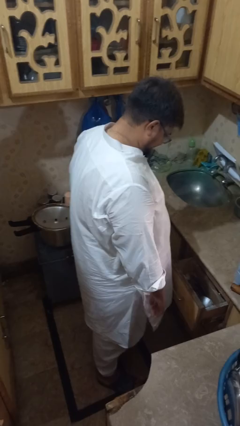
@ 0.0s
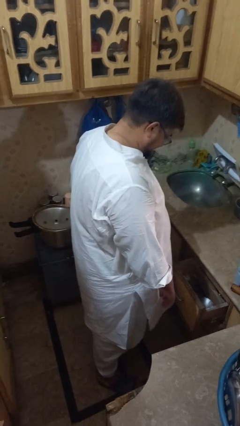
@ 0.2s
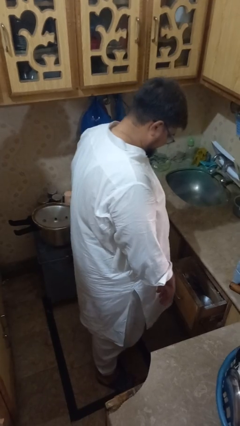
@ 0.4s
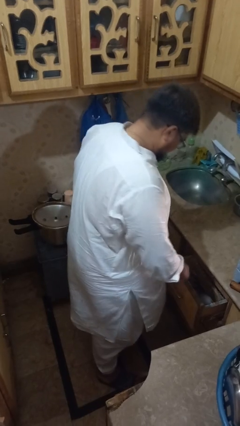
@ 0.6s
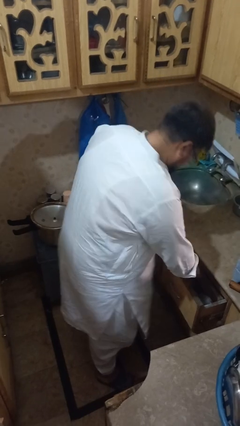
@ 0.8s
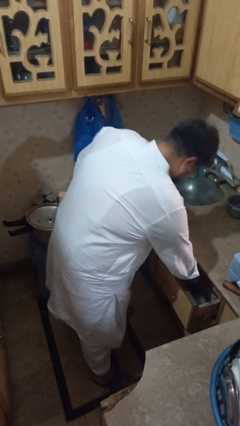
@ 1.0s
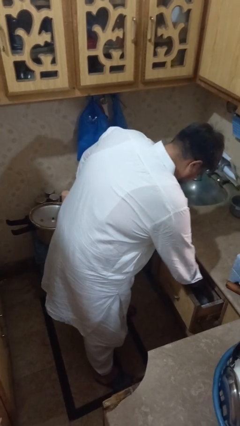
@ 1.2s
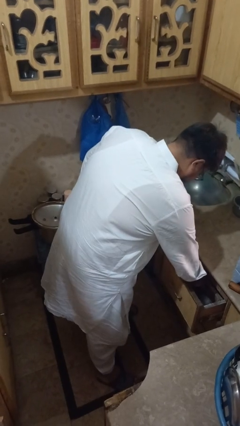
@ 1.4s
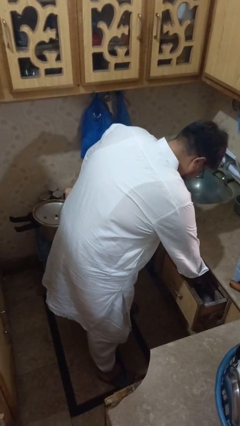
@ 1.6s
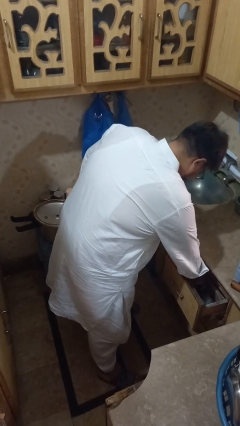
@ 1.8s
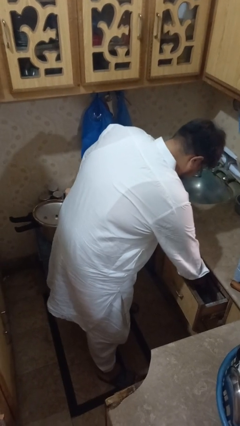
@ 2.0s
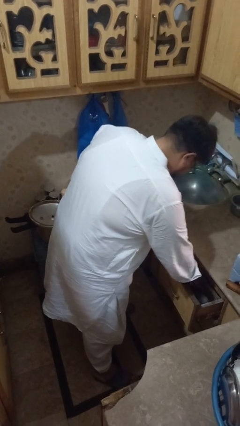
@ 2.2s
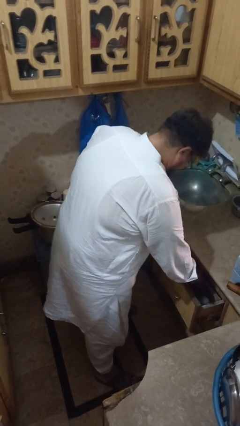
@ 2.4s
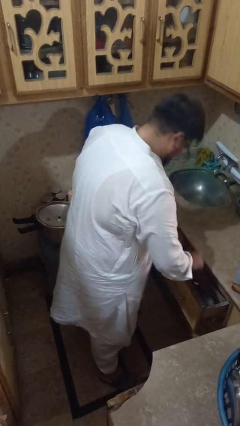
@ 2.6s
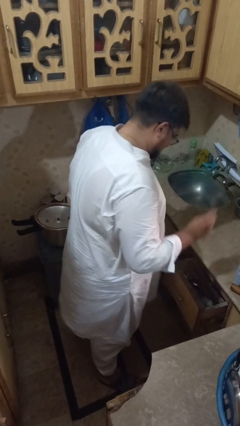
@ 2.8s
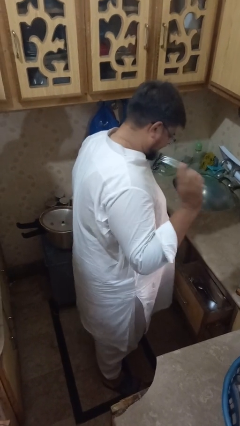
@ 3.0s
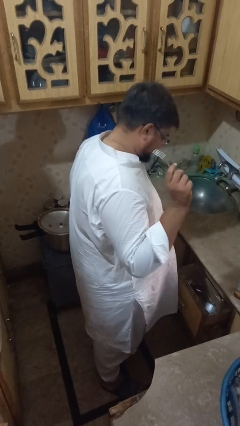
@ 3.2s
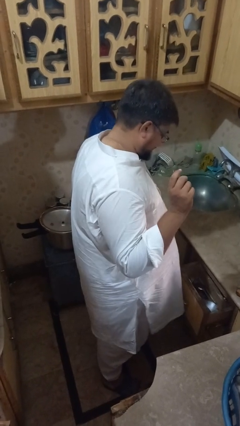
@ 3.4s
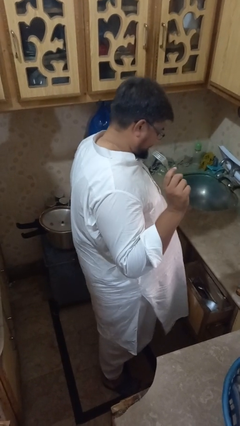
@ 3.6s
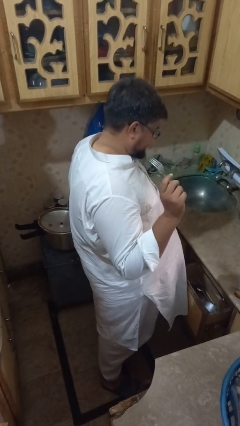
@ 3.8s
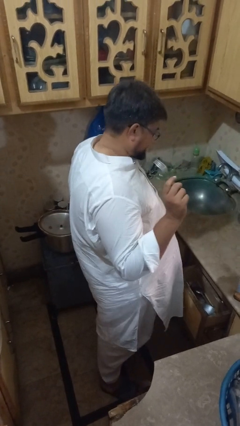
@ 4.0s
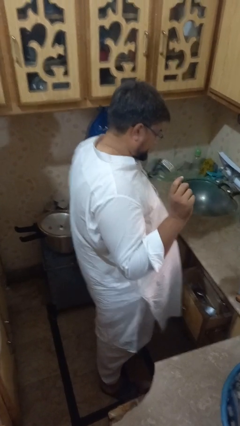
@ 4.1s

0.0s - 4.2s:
person searches in kitchen drawer

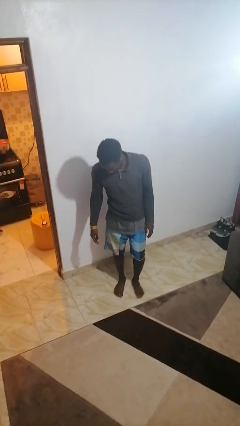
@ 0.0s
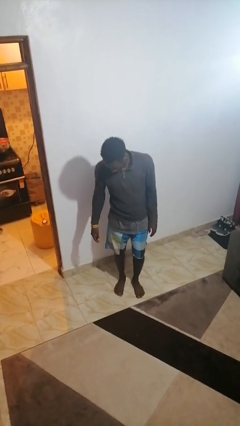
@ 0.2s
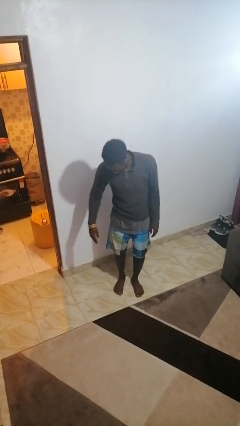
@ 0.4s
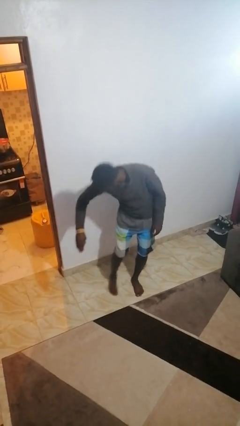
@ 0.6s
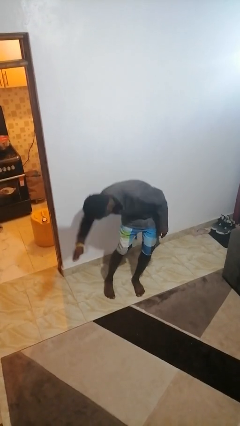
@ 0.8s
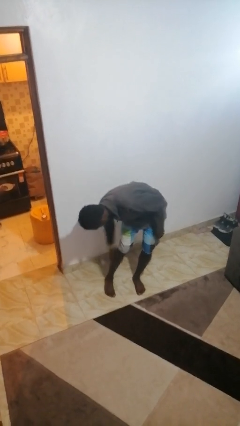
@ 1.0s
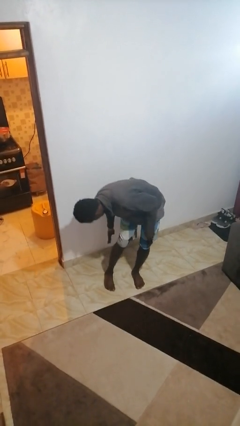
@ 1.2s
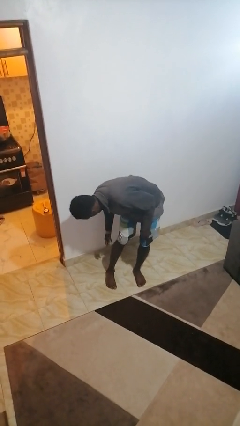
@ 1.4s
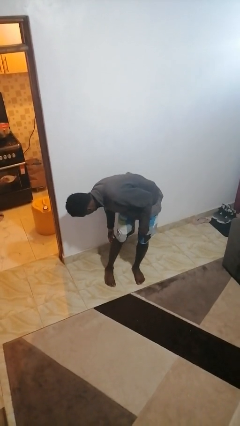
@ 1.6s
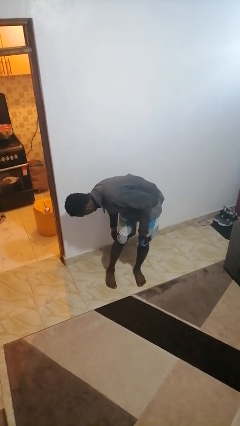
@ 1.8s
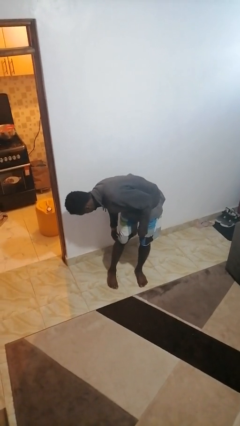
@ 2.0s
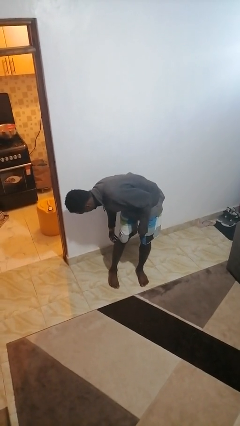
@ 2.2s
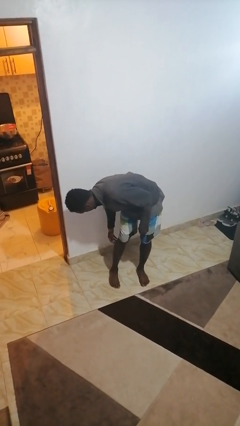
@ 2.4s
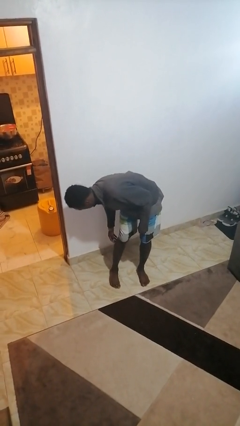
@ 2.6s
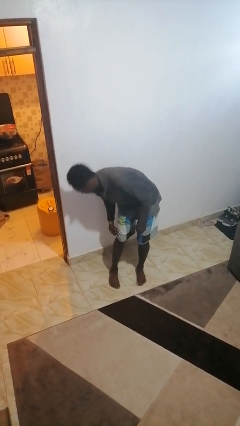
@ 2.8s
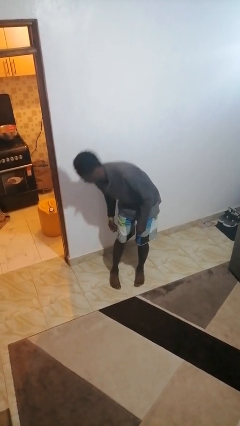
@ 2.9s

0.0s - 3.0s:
person swats bug

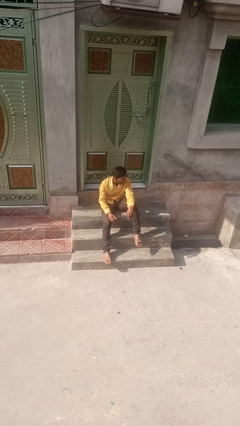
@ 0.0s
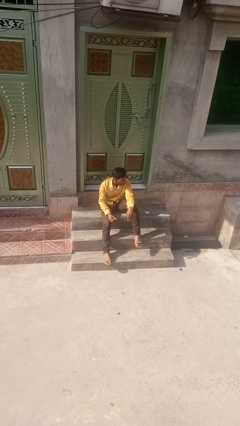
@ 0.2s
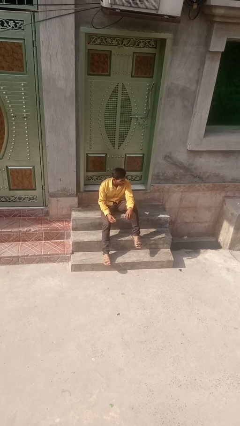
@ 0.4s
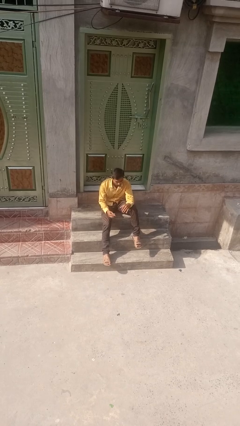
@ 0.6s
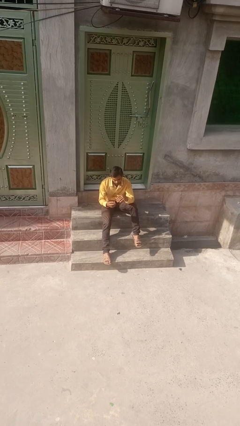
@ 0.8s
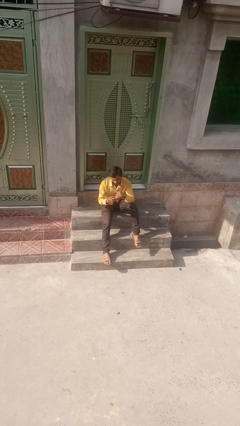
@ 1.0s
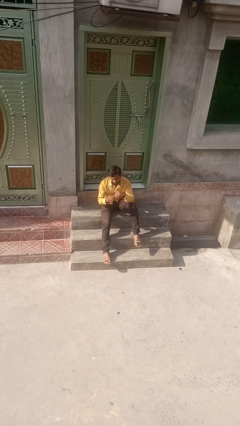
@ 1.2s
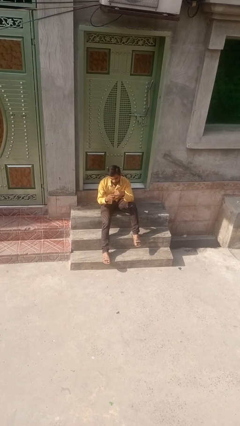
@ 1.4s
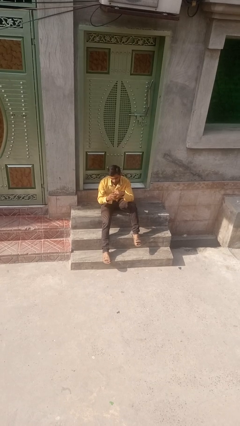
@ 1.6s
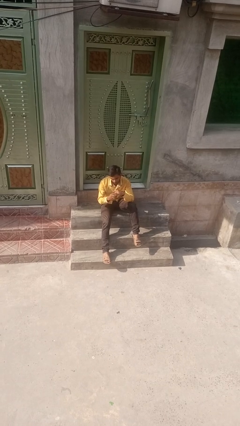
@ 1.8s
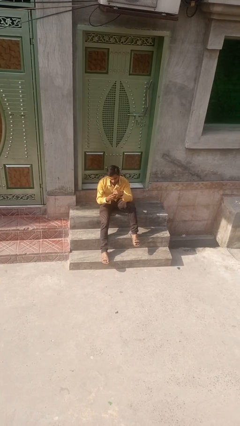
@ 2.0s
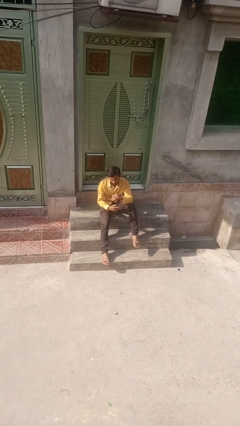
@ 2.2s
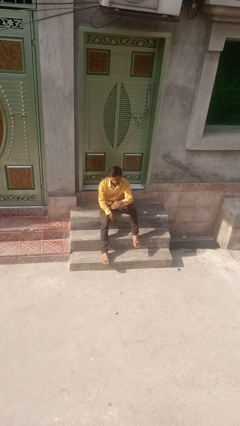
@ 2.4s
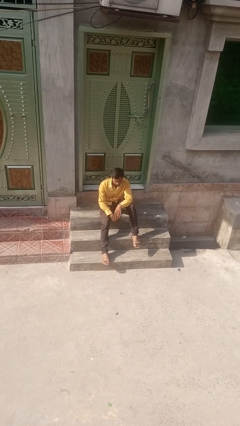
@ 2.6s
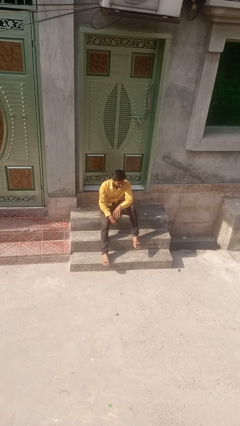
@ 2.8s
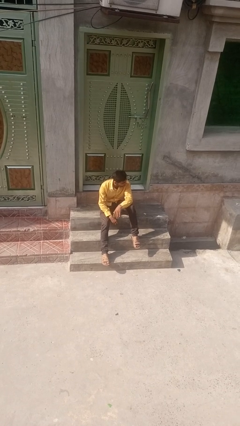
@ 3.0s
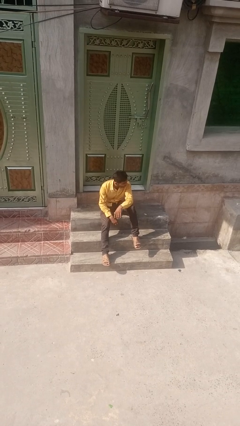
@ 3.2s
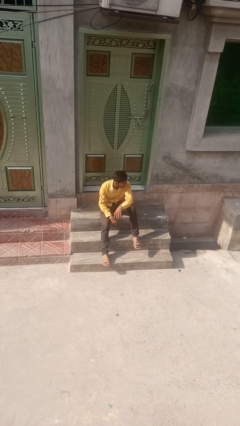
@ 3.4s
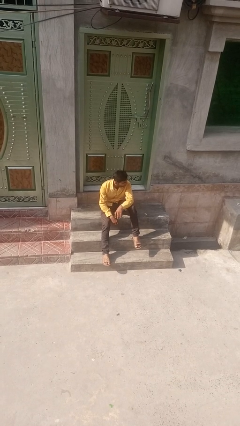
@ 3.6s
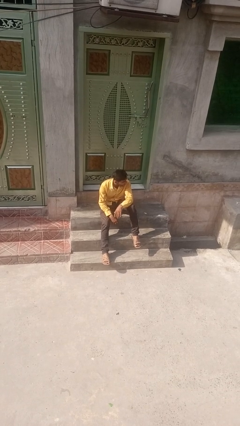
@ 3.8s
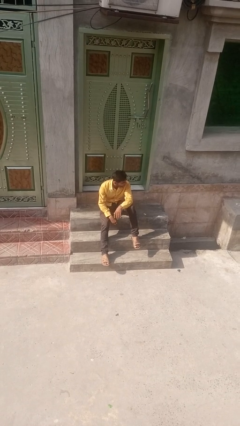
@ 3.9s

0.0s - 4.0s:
person puts on ring

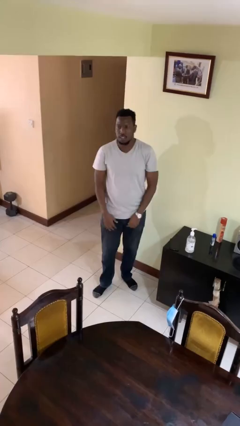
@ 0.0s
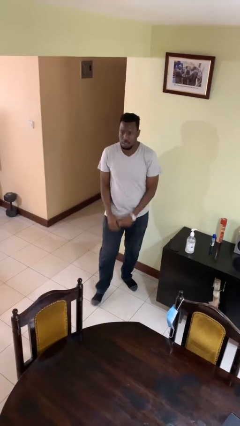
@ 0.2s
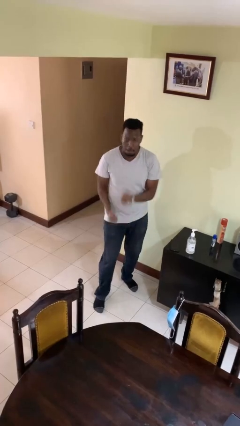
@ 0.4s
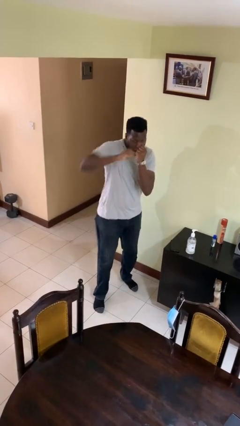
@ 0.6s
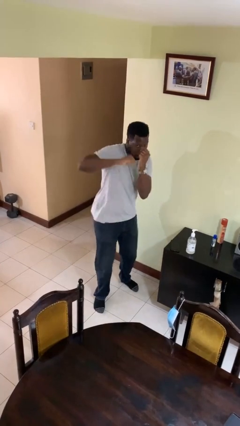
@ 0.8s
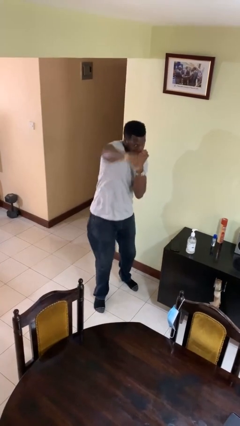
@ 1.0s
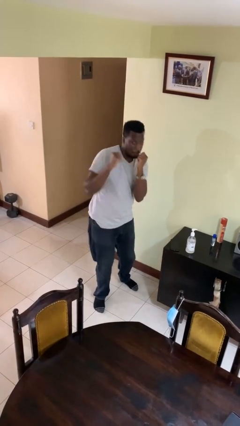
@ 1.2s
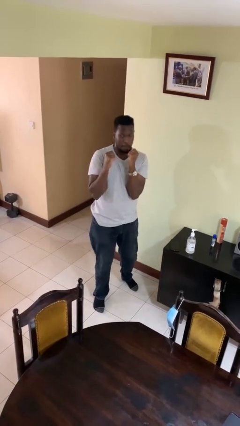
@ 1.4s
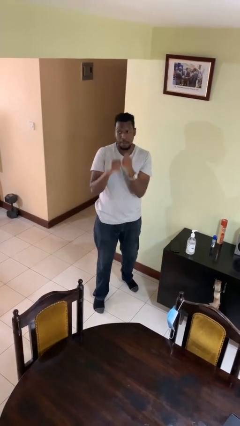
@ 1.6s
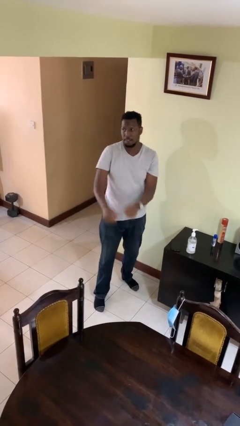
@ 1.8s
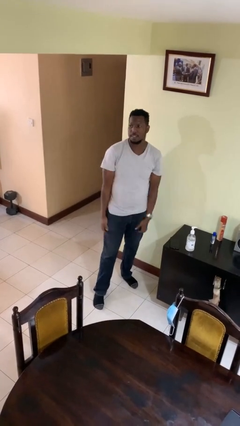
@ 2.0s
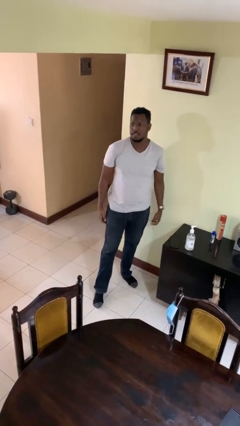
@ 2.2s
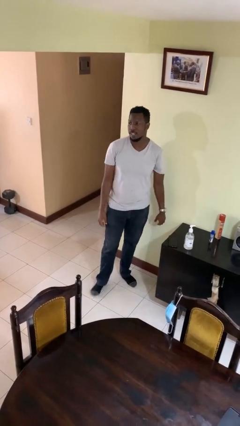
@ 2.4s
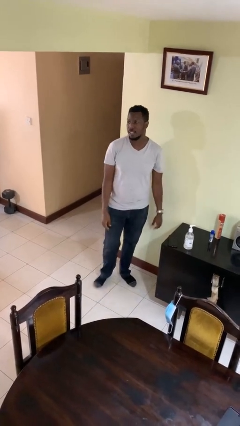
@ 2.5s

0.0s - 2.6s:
person punches

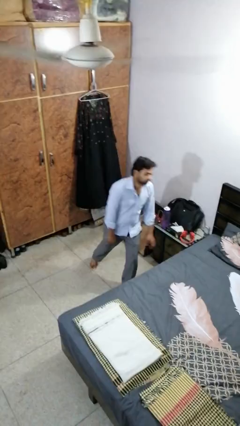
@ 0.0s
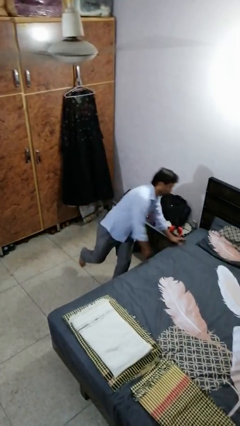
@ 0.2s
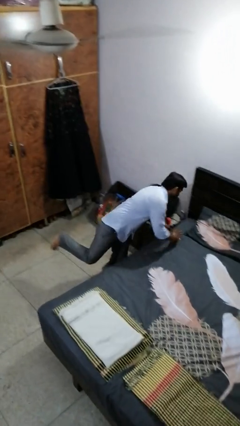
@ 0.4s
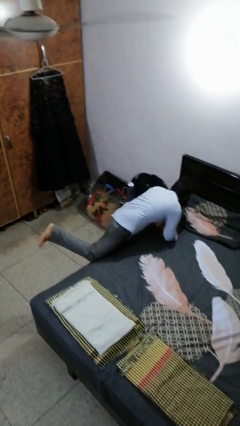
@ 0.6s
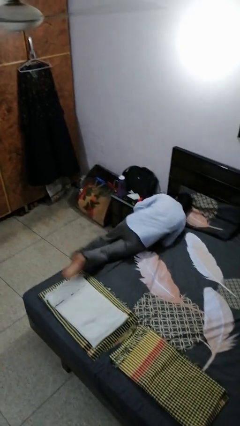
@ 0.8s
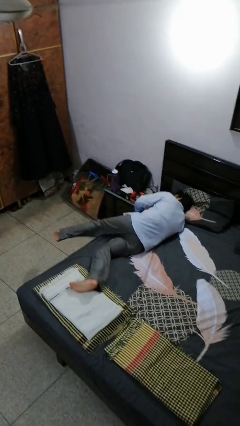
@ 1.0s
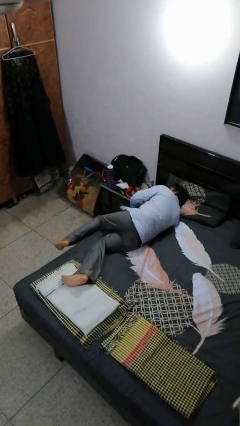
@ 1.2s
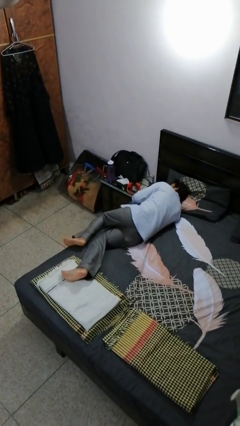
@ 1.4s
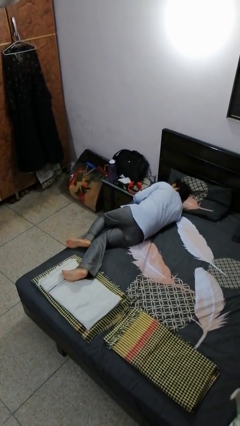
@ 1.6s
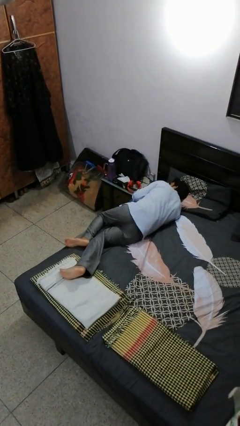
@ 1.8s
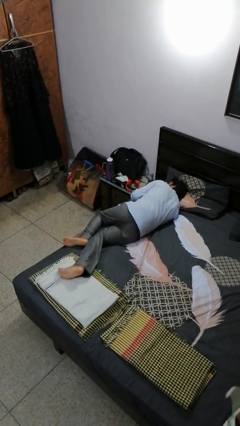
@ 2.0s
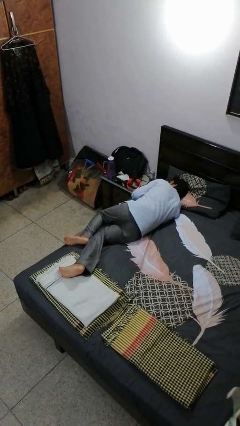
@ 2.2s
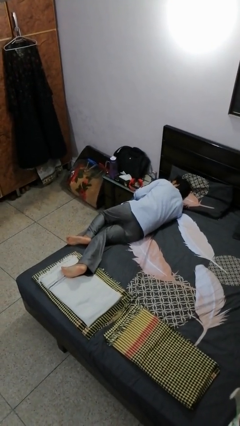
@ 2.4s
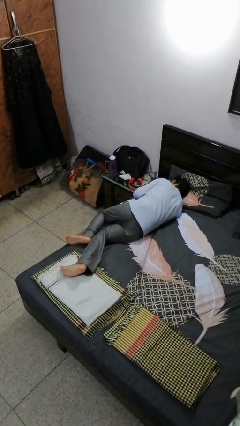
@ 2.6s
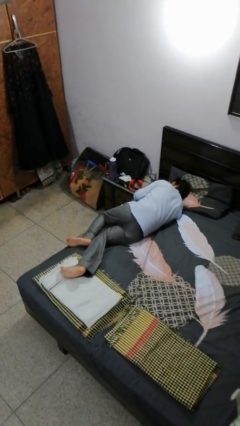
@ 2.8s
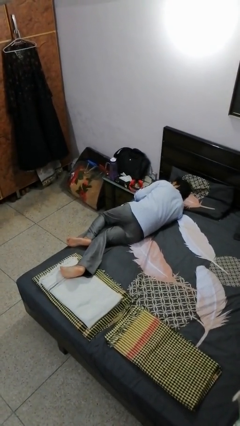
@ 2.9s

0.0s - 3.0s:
person lies down on bed

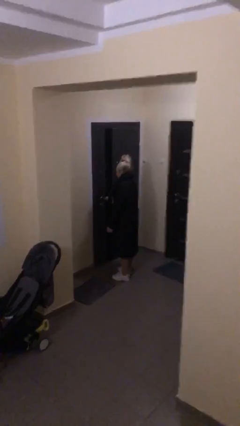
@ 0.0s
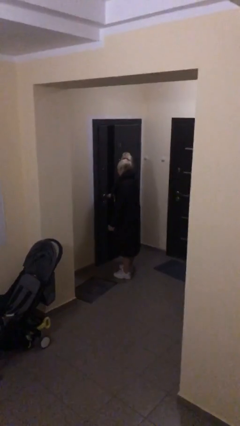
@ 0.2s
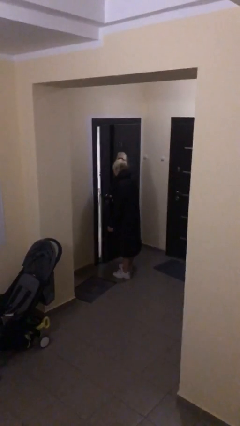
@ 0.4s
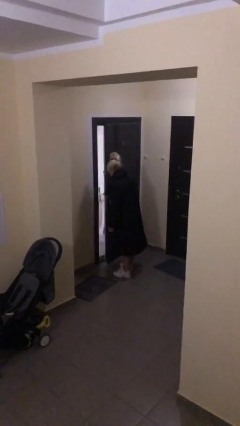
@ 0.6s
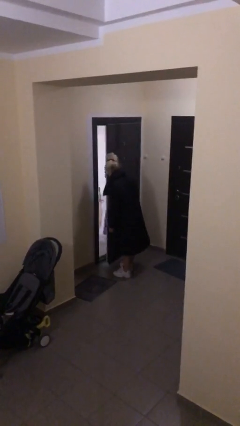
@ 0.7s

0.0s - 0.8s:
person opens facility door
